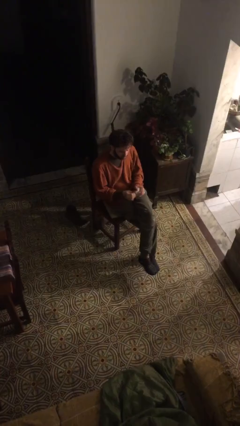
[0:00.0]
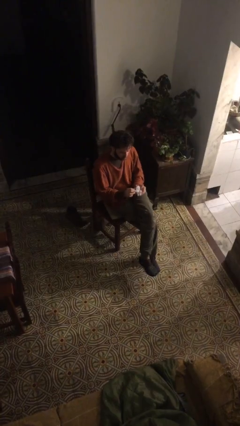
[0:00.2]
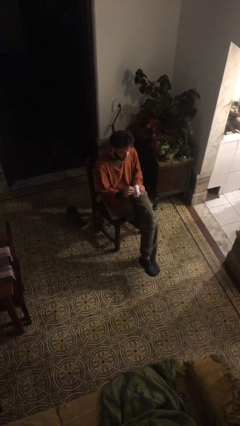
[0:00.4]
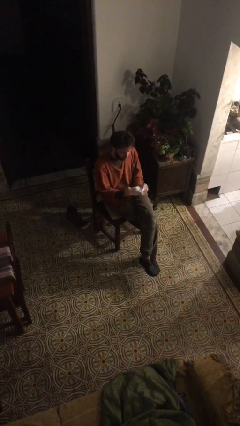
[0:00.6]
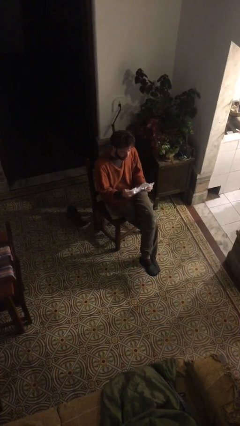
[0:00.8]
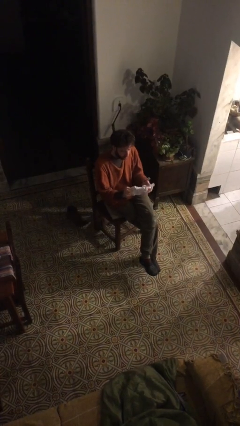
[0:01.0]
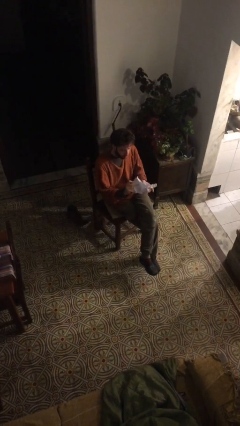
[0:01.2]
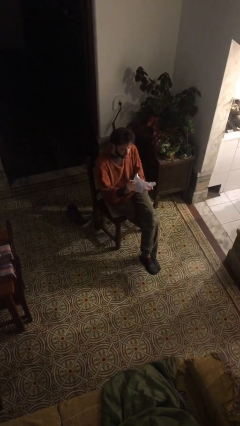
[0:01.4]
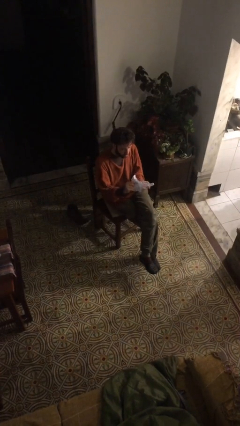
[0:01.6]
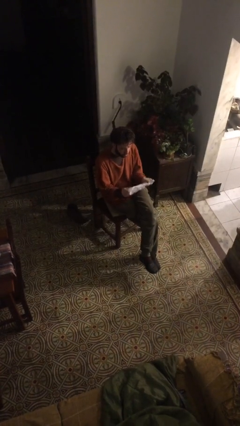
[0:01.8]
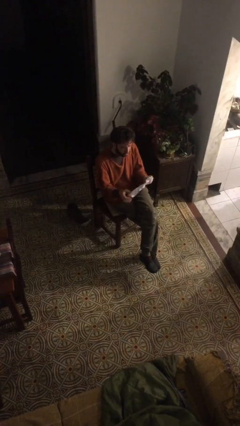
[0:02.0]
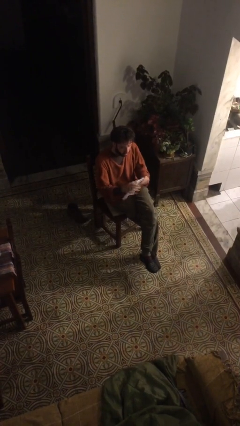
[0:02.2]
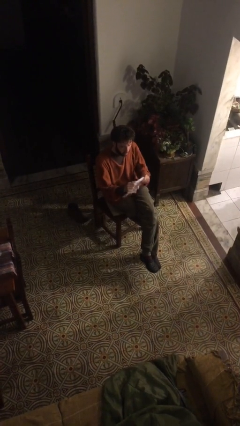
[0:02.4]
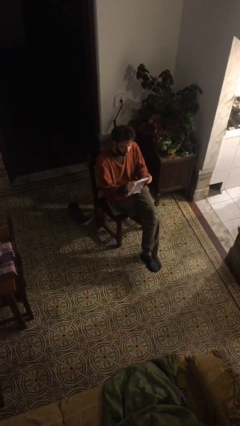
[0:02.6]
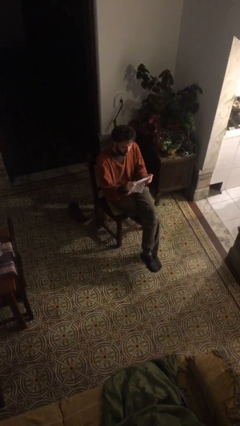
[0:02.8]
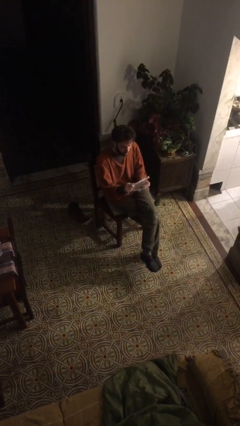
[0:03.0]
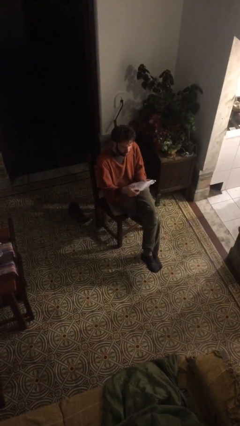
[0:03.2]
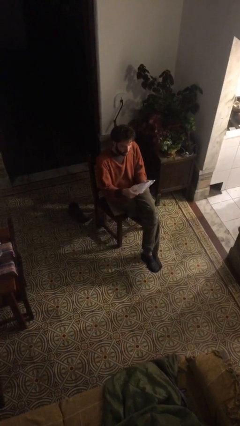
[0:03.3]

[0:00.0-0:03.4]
person crumples paper

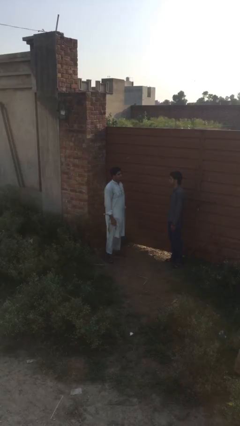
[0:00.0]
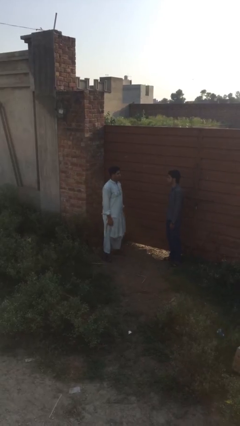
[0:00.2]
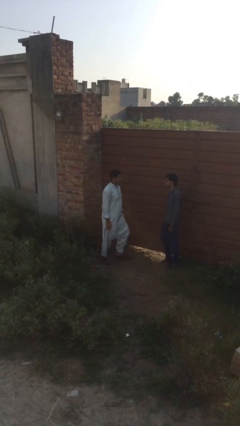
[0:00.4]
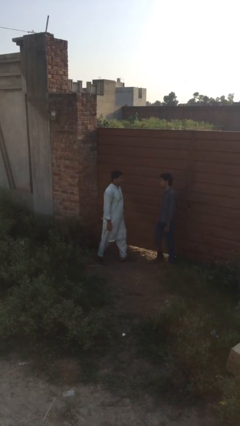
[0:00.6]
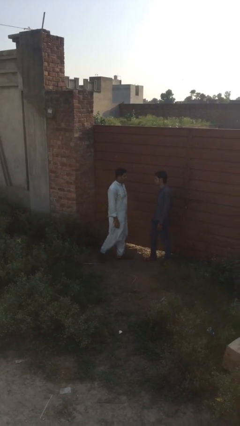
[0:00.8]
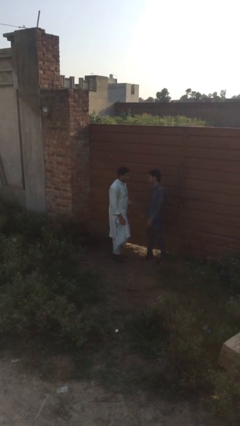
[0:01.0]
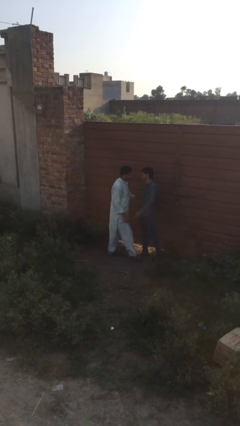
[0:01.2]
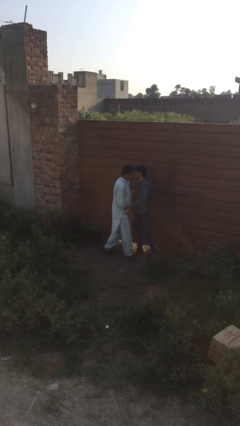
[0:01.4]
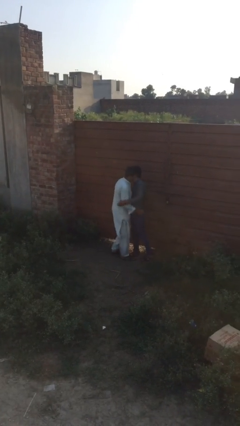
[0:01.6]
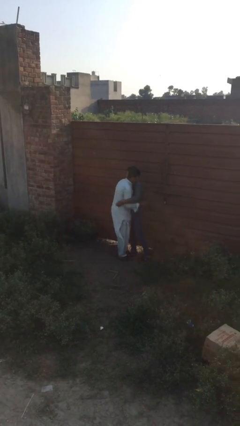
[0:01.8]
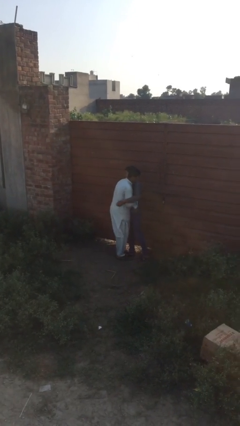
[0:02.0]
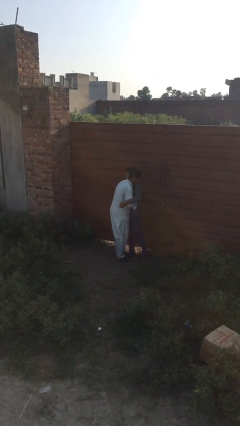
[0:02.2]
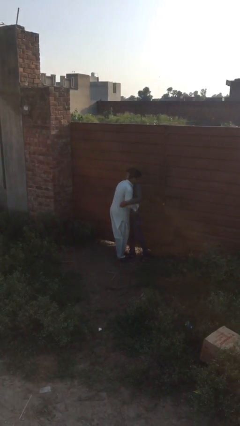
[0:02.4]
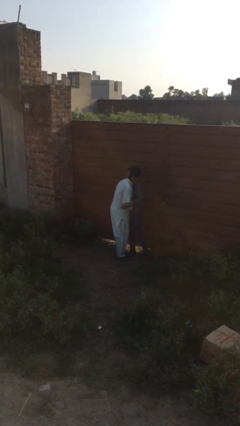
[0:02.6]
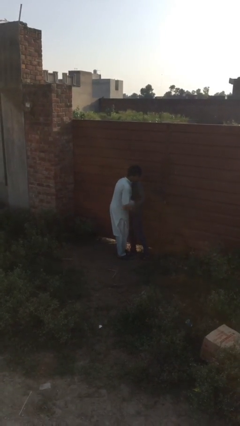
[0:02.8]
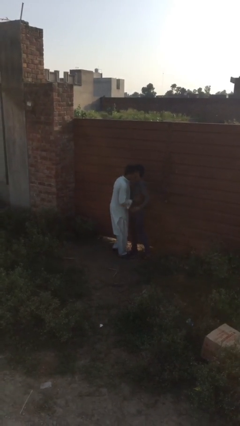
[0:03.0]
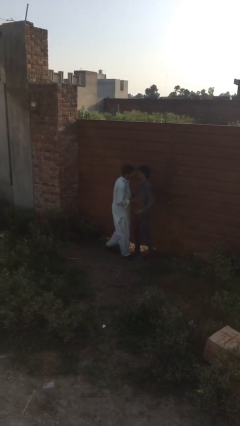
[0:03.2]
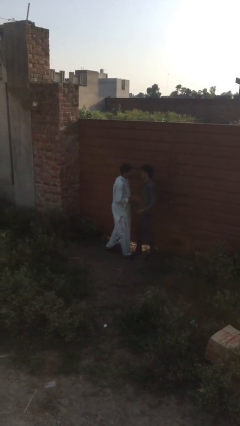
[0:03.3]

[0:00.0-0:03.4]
person embraces person

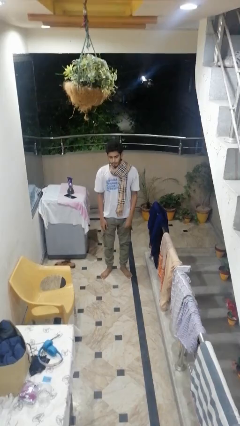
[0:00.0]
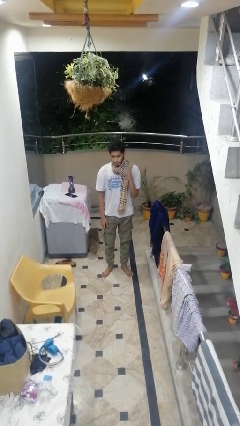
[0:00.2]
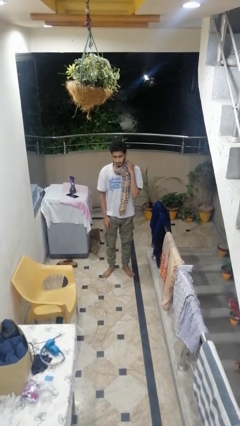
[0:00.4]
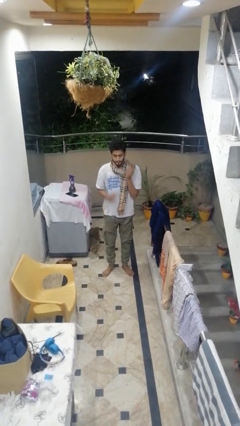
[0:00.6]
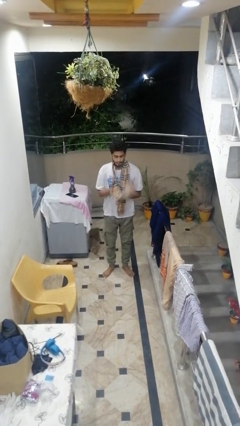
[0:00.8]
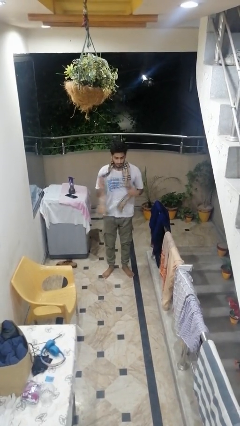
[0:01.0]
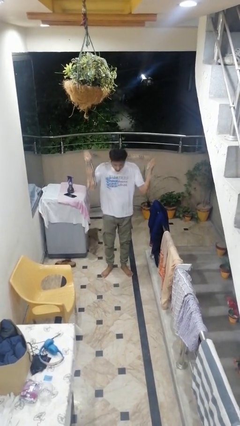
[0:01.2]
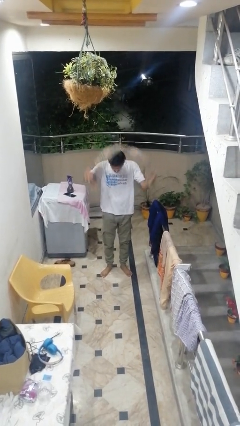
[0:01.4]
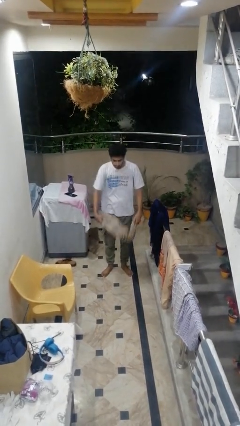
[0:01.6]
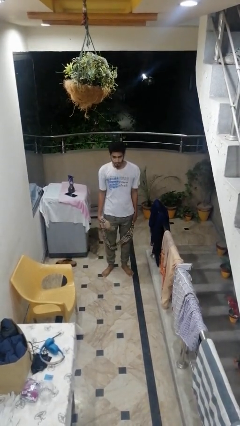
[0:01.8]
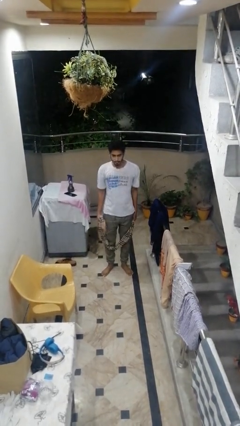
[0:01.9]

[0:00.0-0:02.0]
person takes off scarf

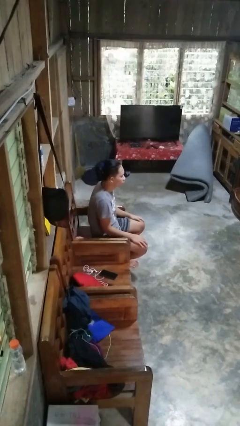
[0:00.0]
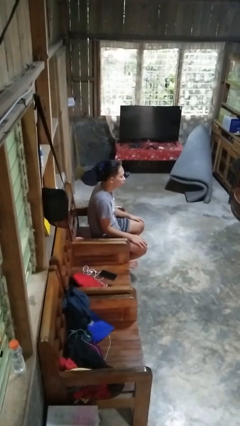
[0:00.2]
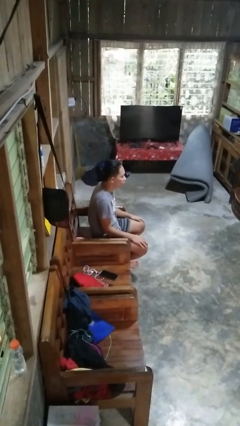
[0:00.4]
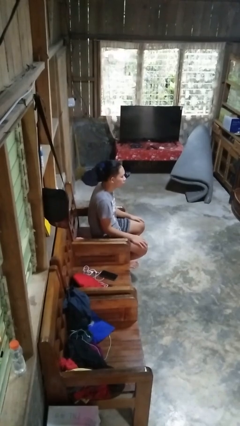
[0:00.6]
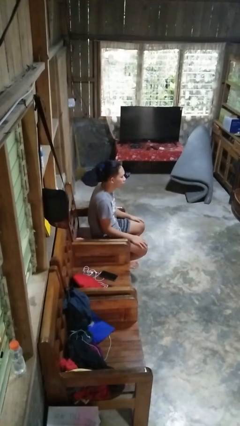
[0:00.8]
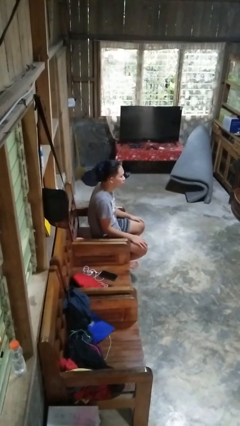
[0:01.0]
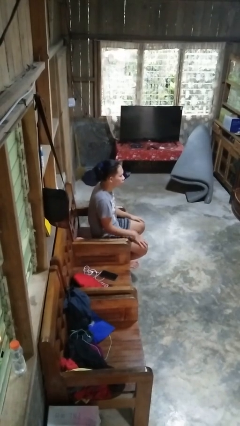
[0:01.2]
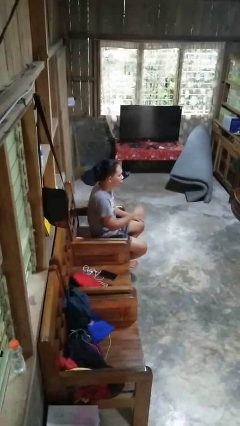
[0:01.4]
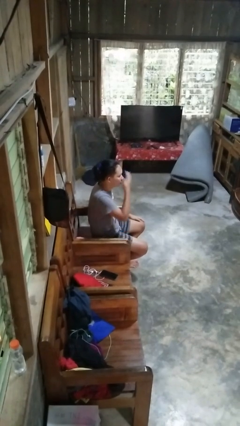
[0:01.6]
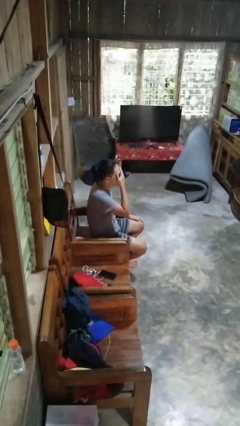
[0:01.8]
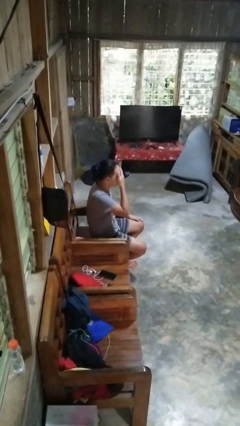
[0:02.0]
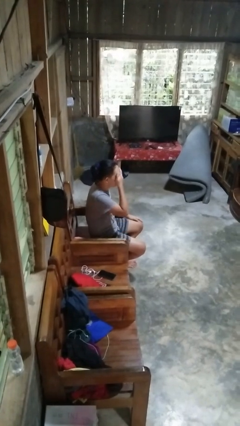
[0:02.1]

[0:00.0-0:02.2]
person covers face with hands

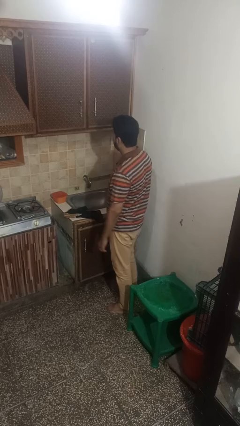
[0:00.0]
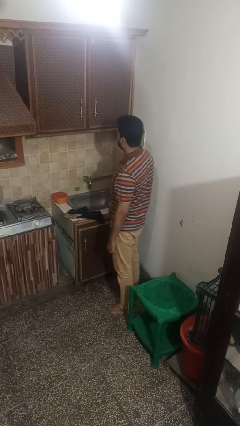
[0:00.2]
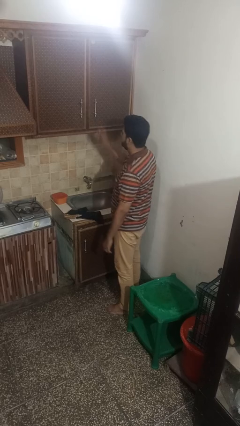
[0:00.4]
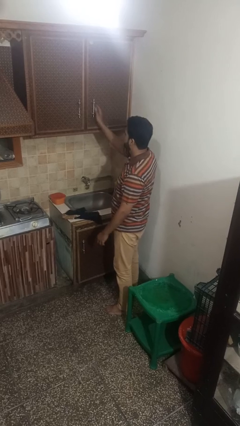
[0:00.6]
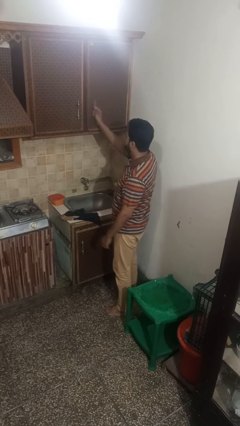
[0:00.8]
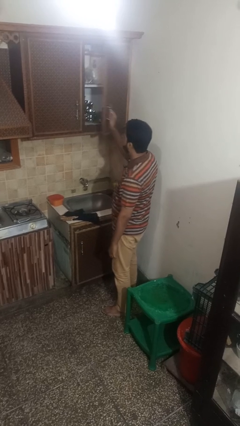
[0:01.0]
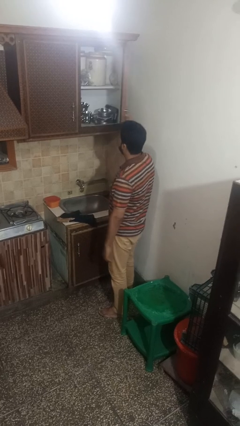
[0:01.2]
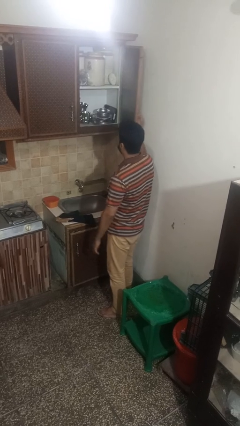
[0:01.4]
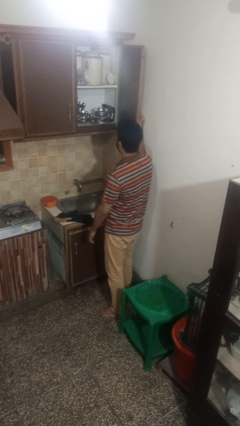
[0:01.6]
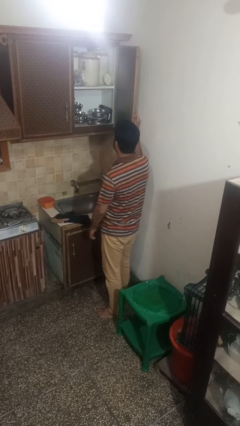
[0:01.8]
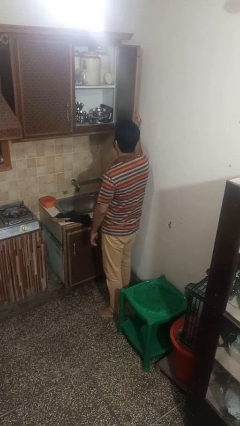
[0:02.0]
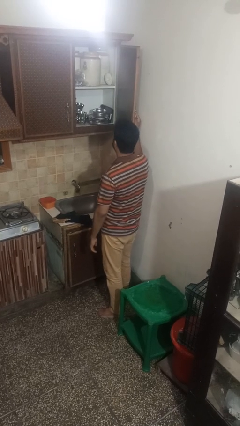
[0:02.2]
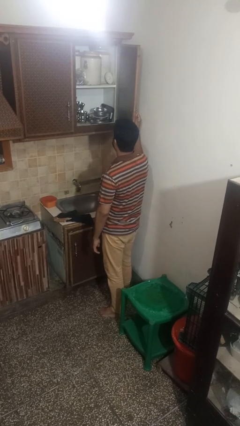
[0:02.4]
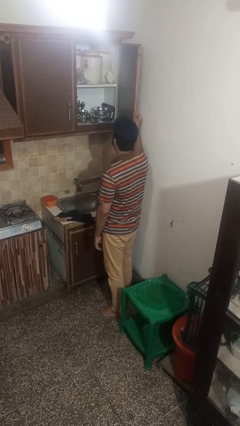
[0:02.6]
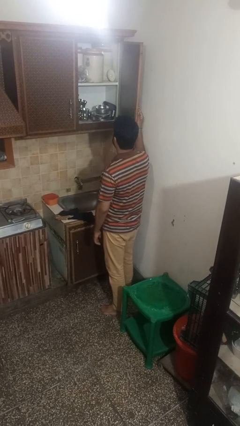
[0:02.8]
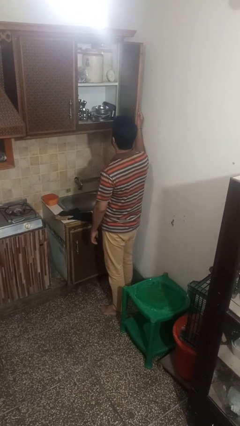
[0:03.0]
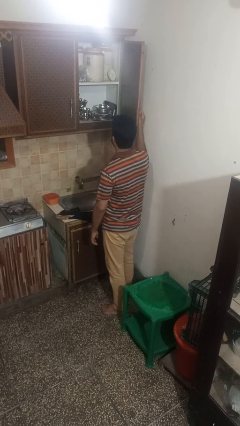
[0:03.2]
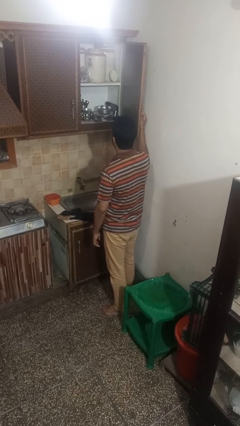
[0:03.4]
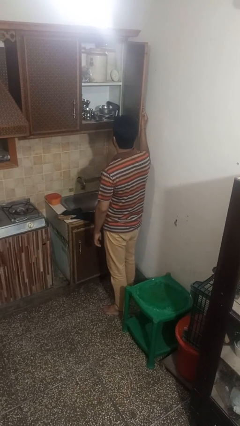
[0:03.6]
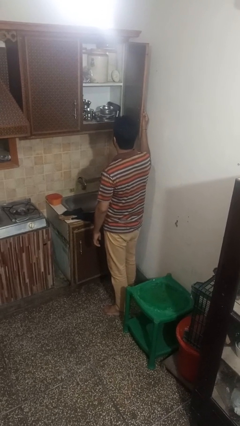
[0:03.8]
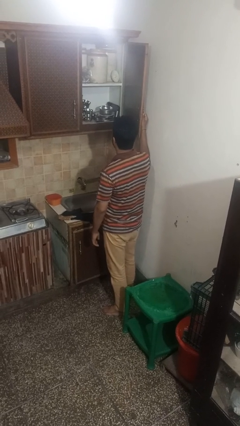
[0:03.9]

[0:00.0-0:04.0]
person opens cabinet

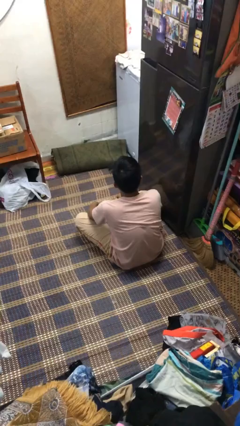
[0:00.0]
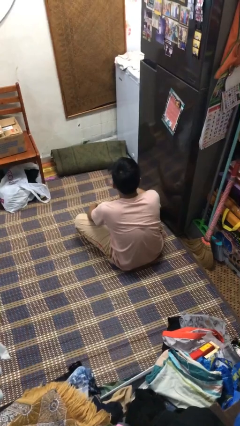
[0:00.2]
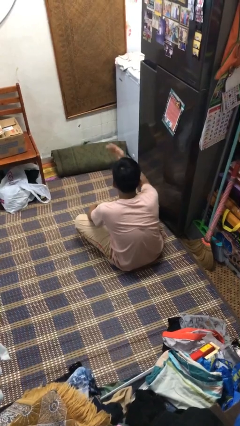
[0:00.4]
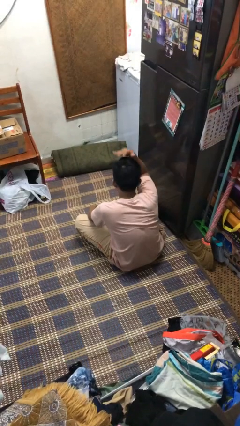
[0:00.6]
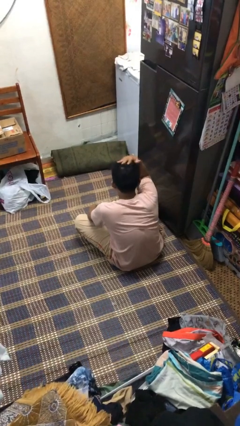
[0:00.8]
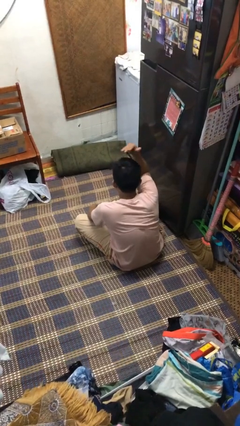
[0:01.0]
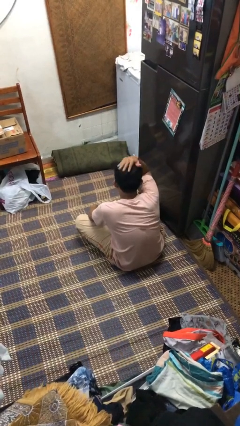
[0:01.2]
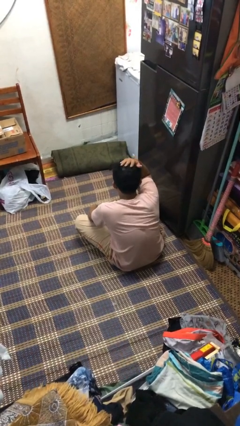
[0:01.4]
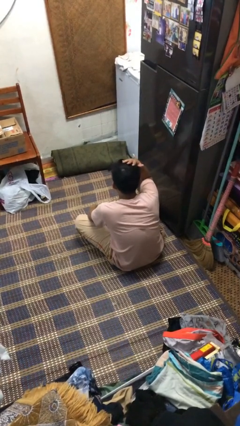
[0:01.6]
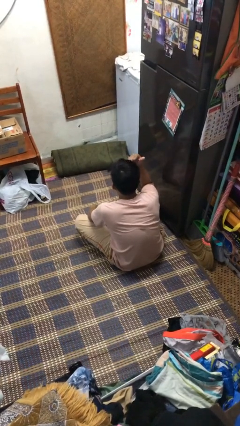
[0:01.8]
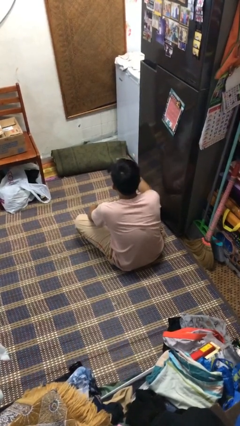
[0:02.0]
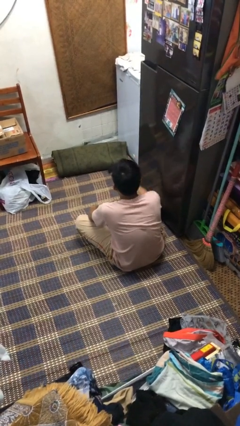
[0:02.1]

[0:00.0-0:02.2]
person pats head
